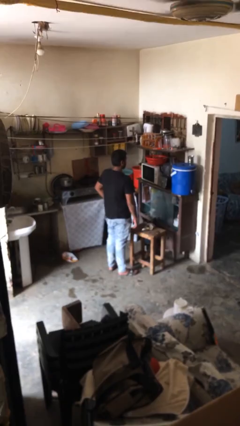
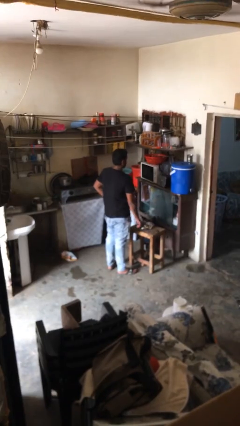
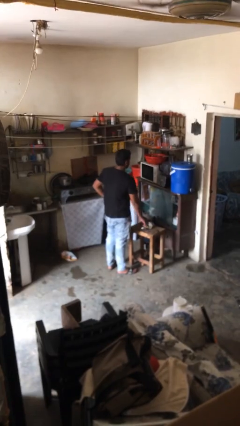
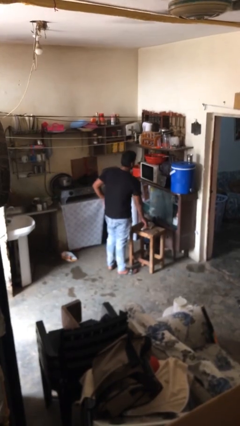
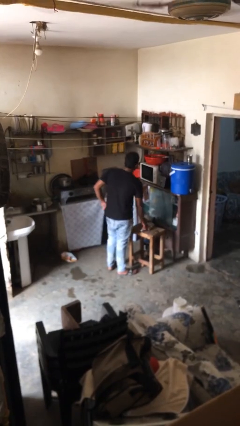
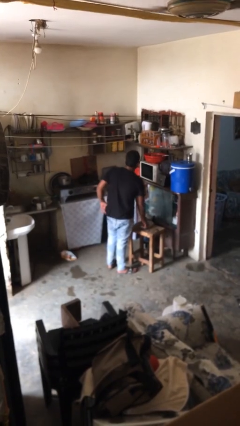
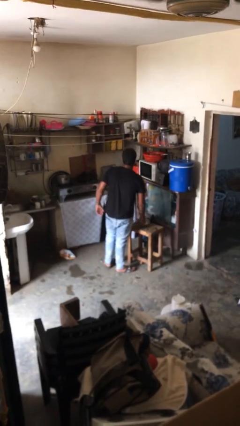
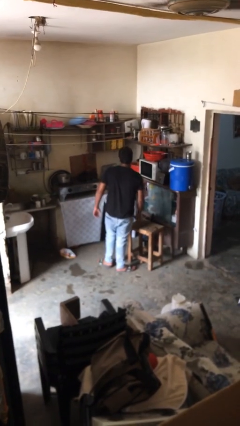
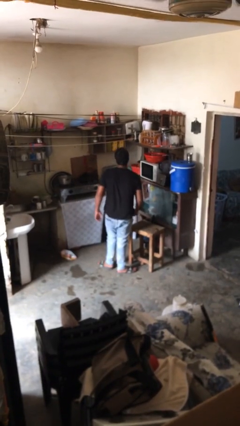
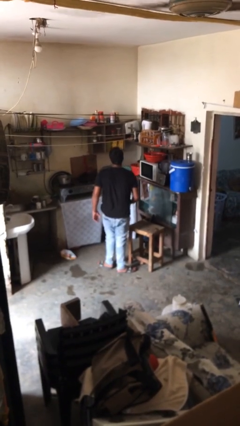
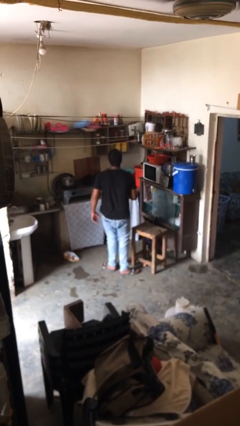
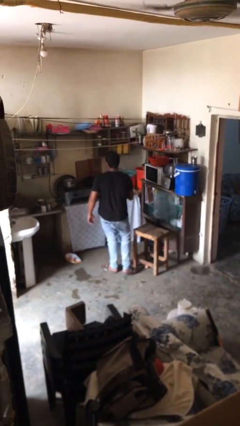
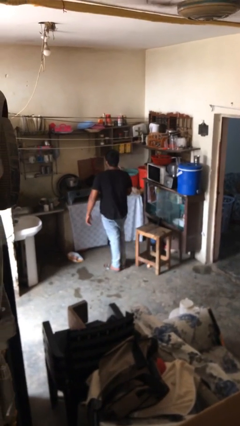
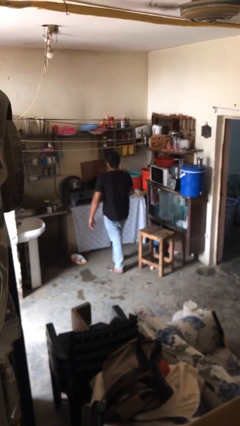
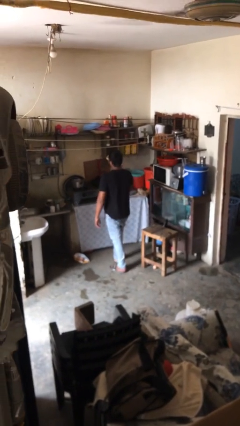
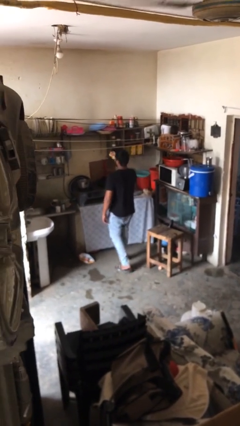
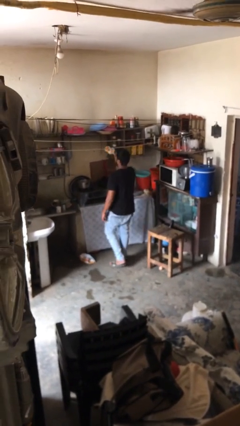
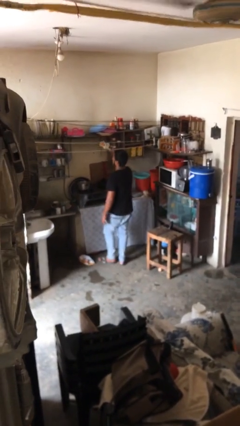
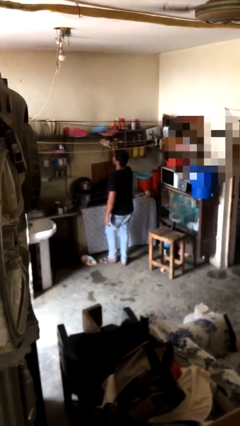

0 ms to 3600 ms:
person picks up object from table

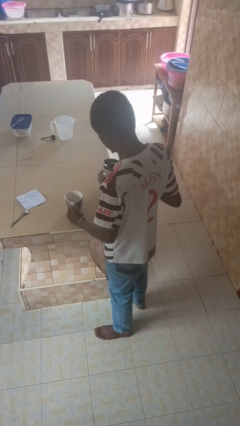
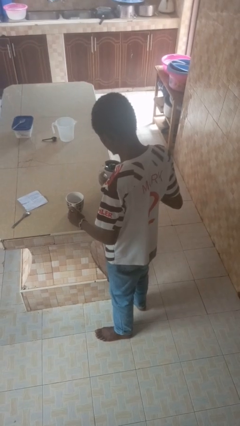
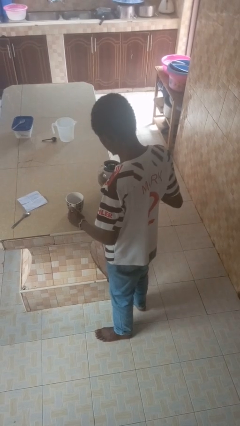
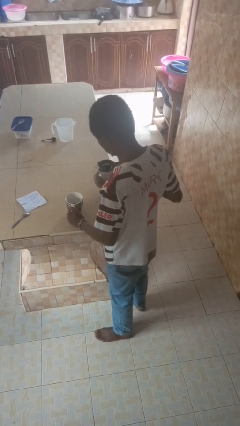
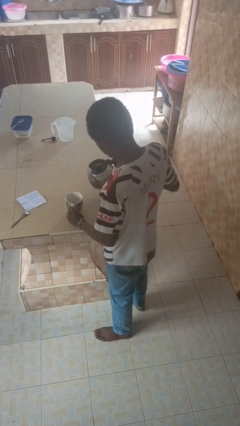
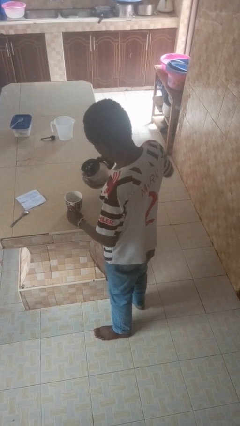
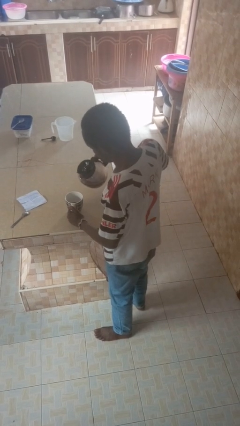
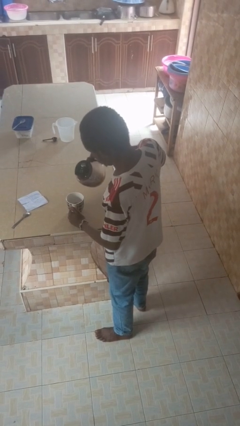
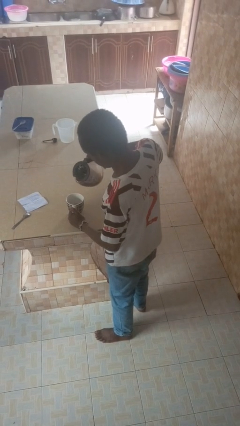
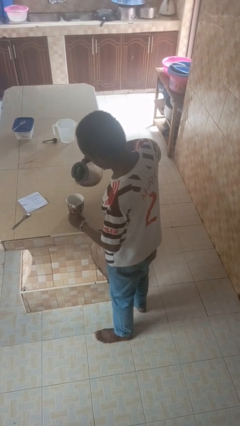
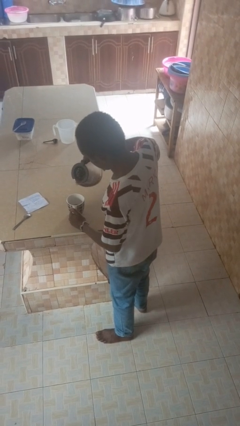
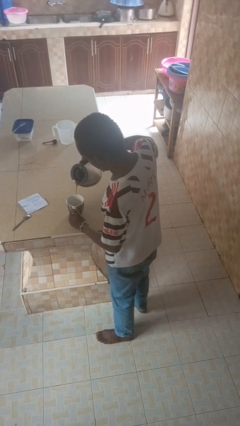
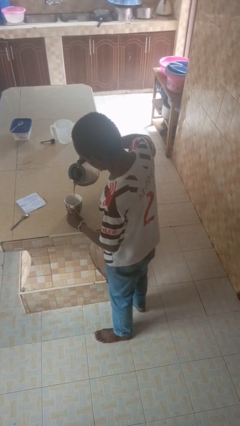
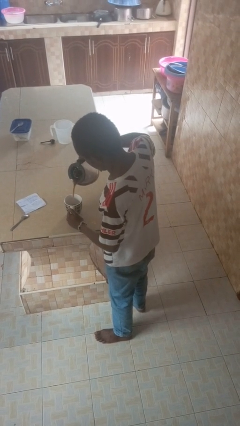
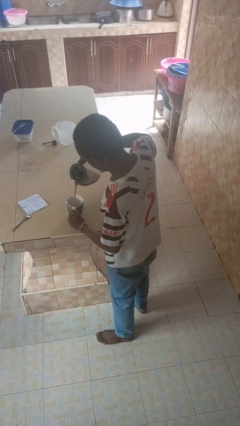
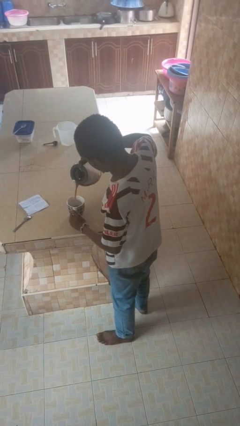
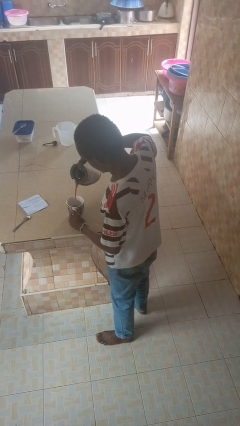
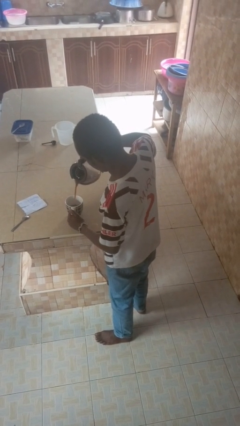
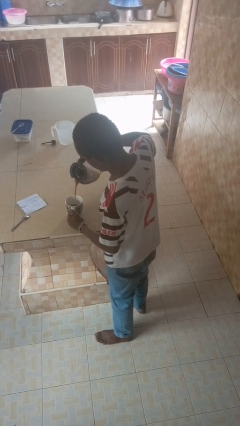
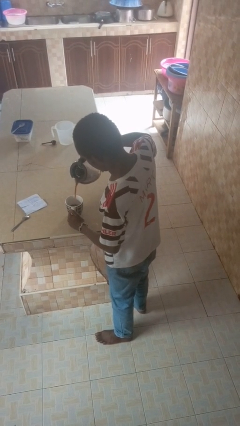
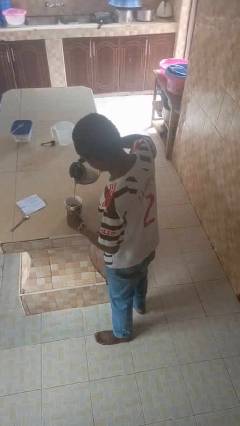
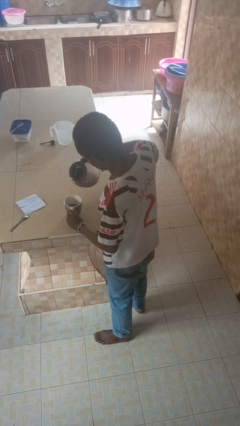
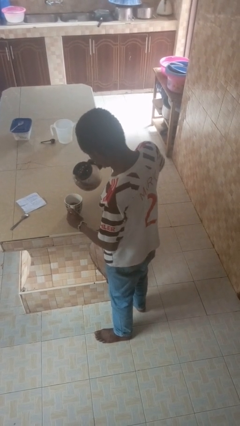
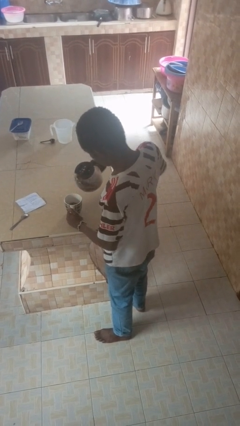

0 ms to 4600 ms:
person pours coffee into mug

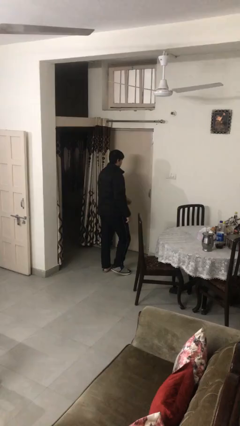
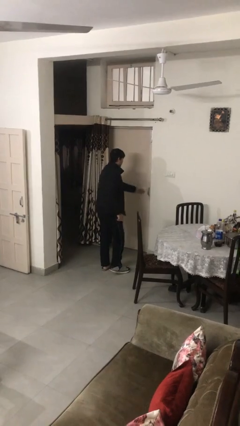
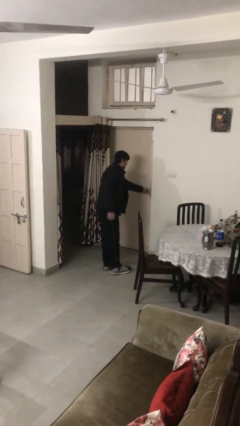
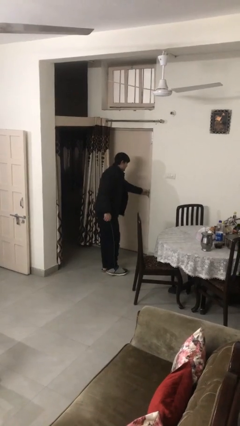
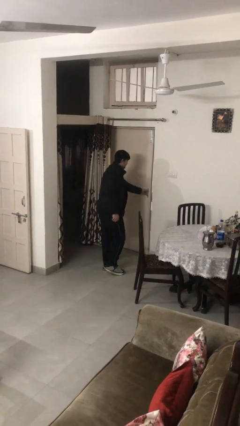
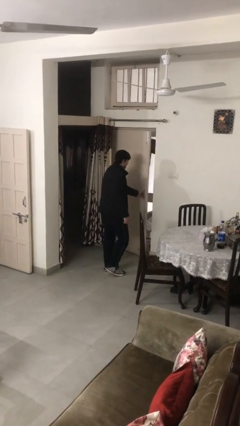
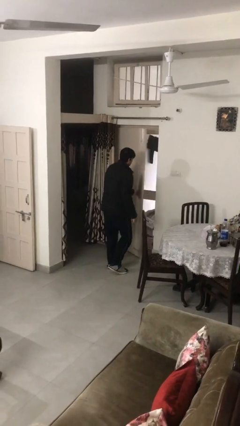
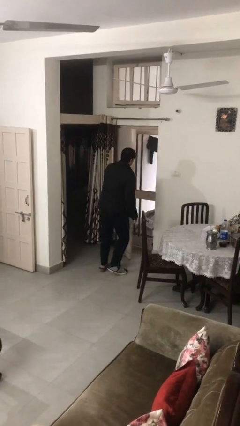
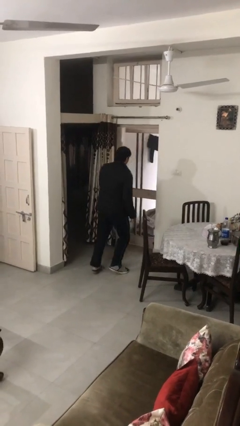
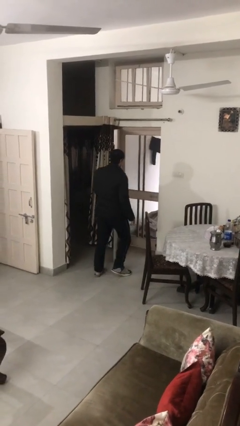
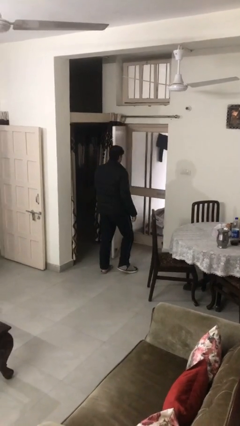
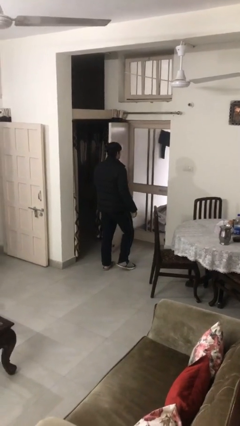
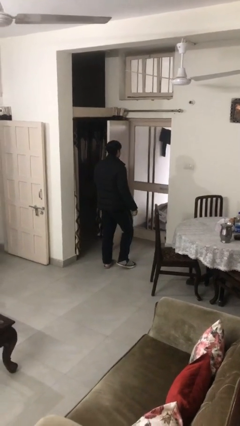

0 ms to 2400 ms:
person opens facility door

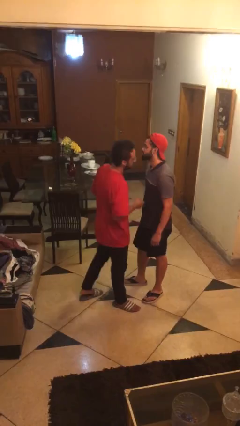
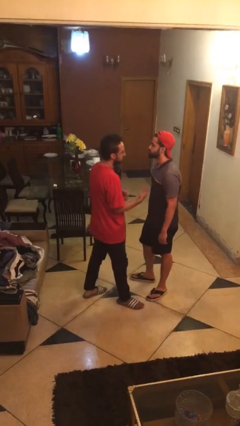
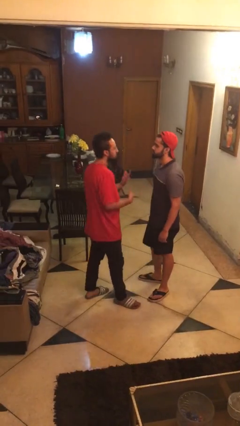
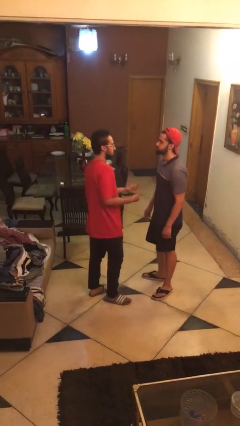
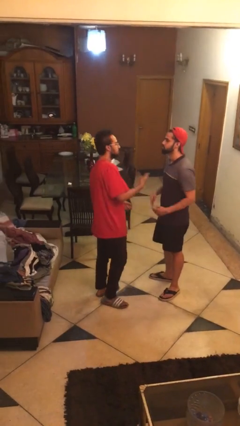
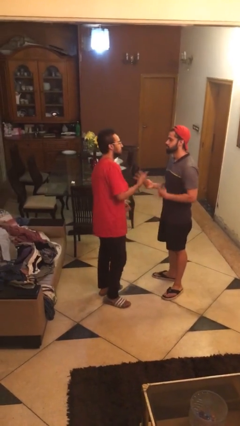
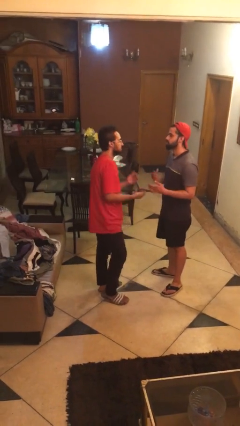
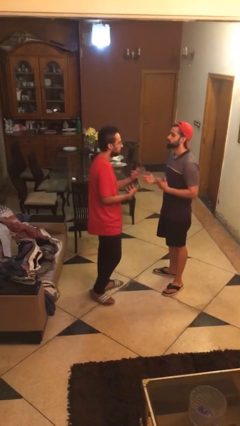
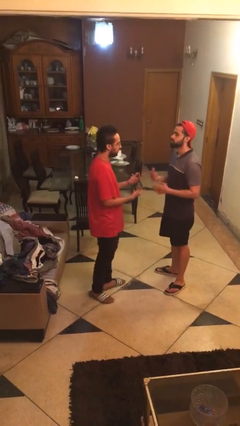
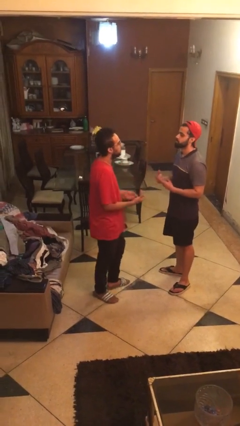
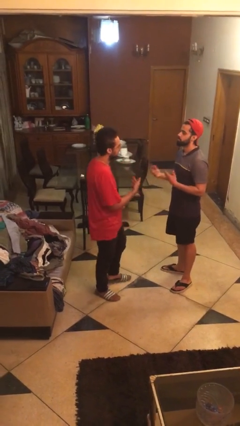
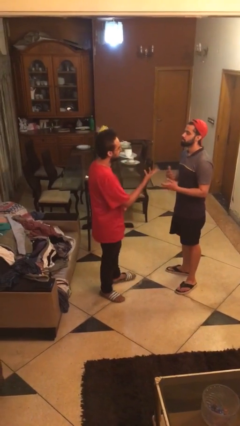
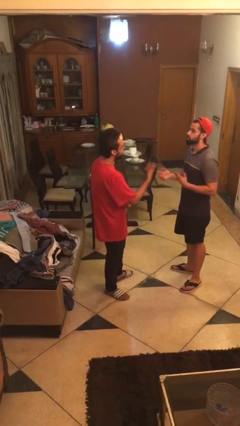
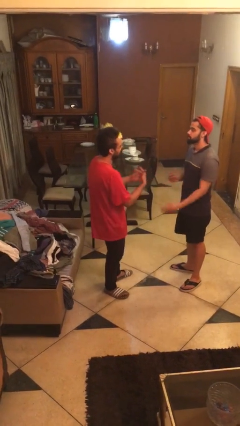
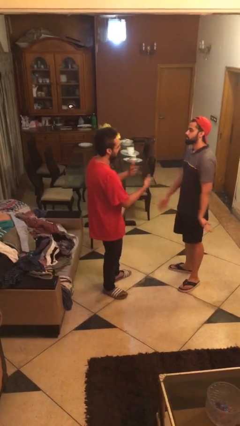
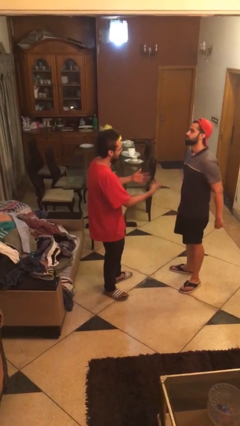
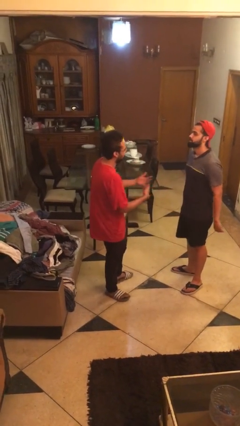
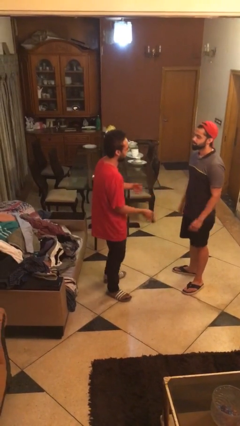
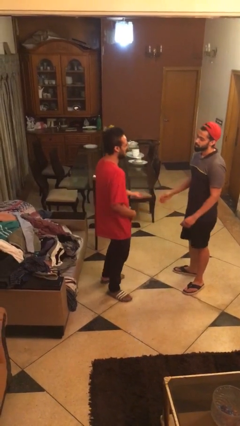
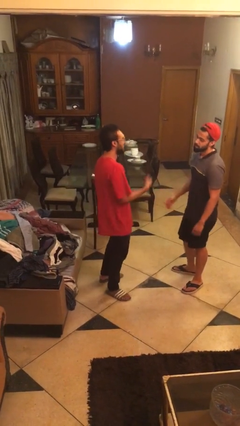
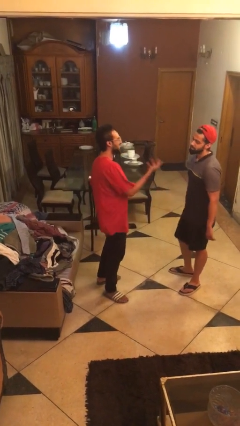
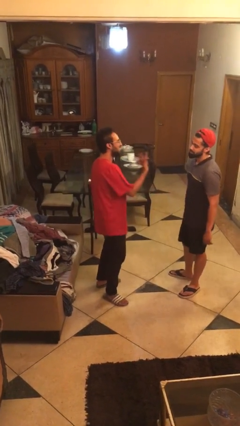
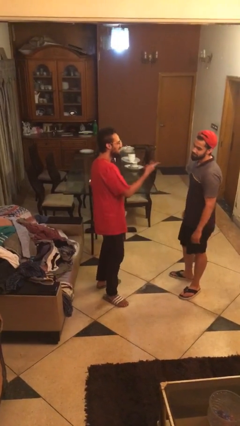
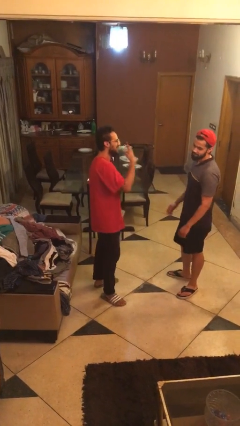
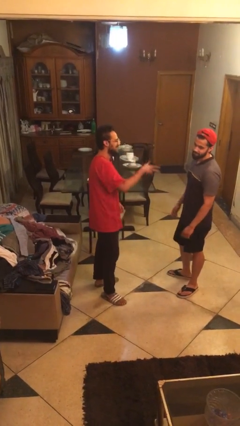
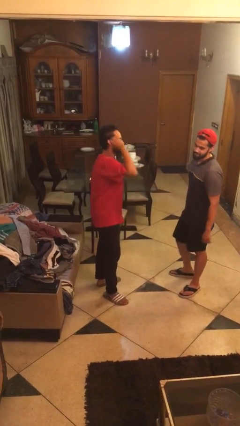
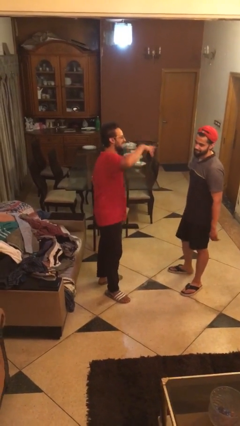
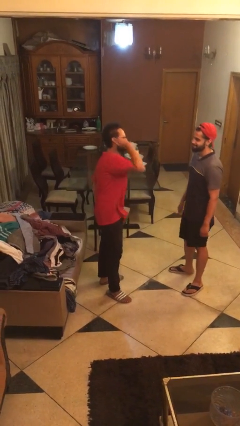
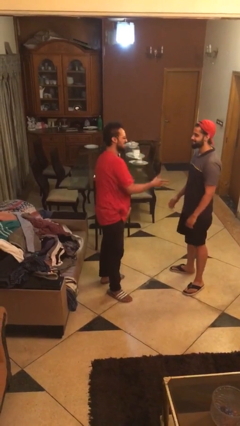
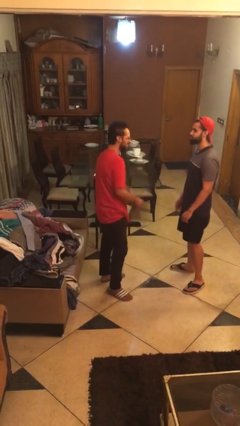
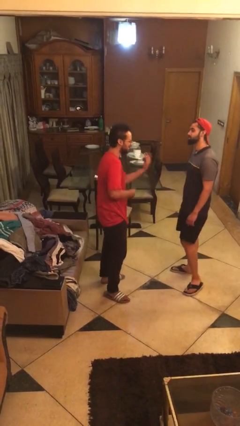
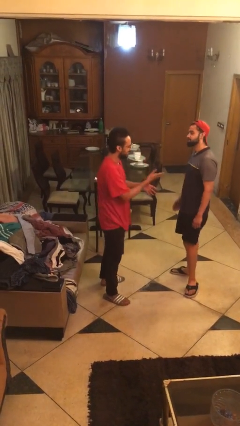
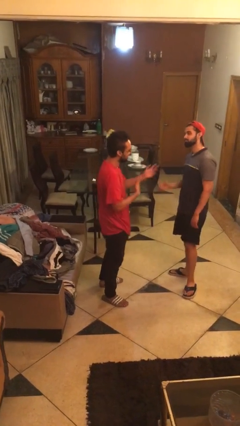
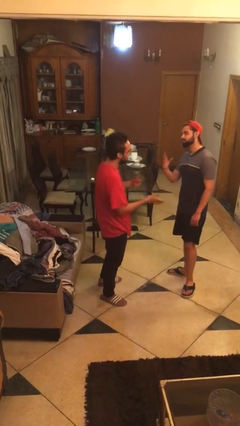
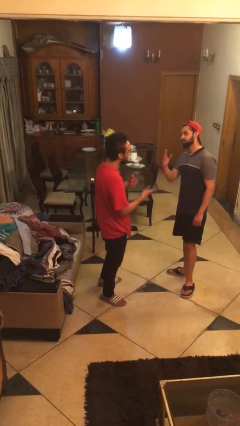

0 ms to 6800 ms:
person talks to person
